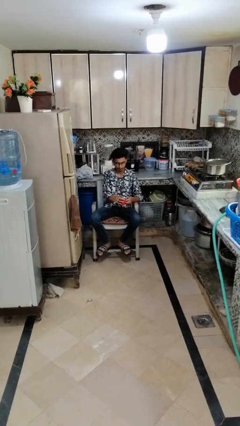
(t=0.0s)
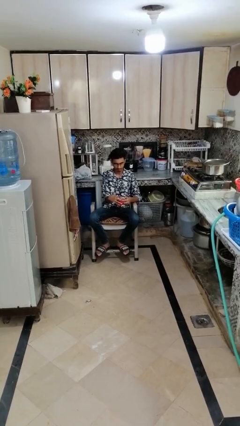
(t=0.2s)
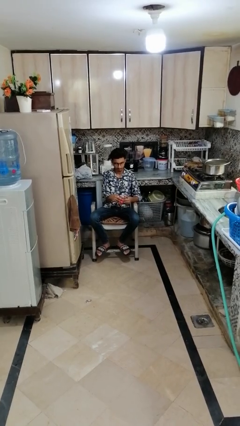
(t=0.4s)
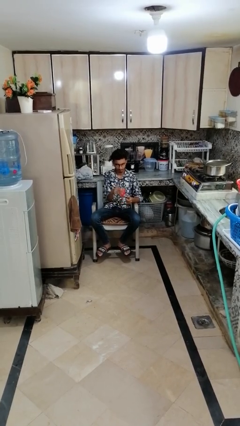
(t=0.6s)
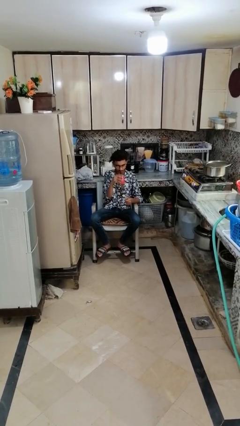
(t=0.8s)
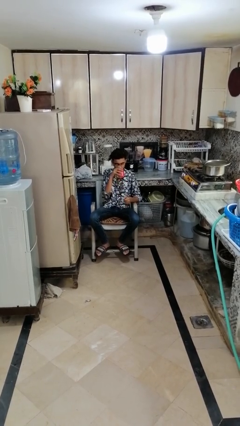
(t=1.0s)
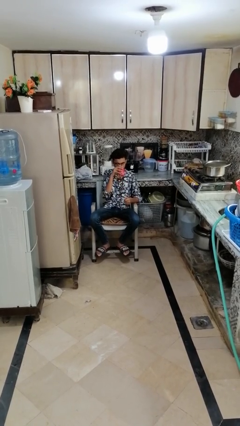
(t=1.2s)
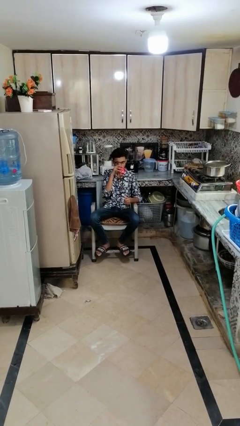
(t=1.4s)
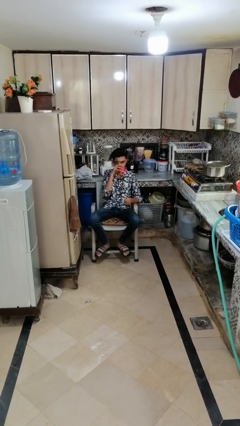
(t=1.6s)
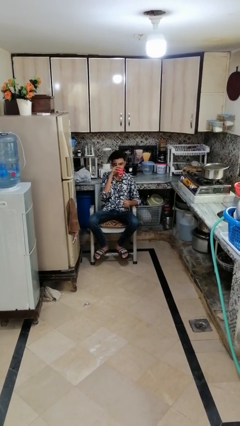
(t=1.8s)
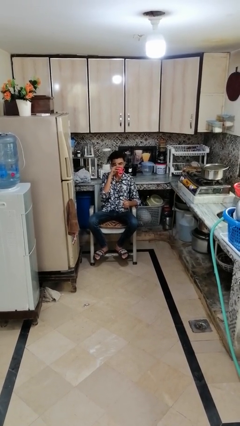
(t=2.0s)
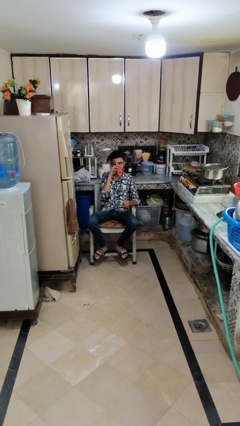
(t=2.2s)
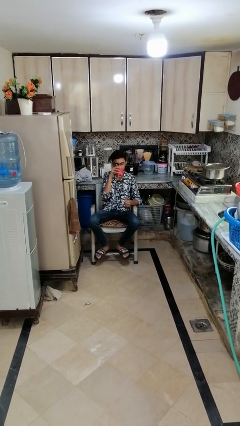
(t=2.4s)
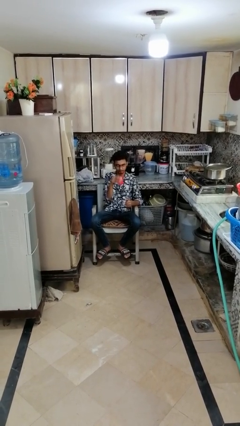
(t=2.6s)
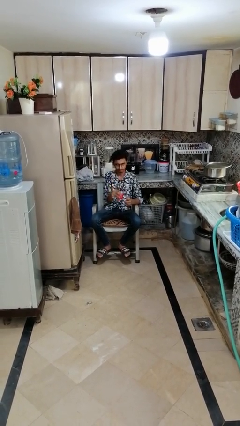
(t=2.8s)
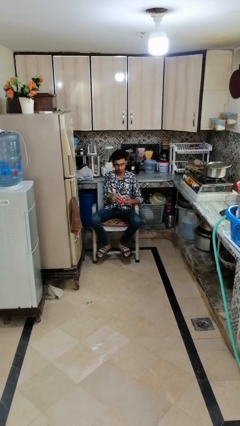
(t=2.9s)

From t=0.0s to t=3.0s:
person drinks from mug

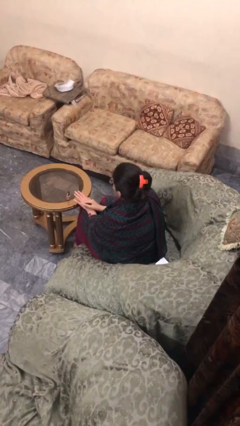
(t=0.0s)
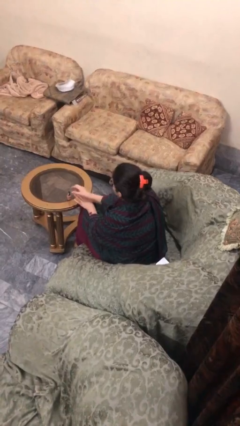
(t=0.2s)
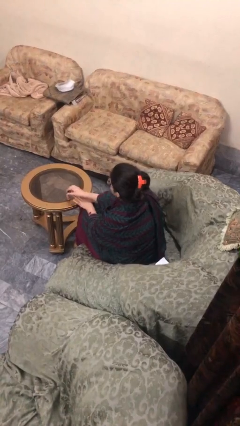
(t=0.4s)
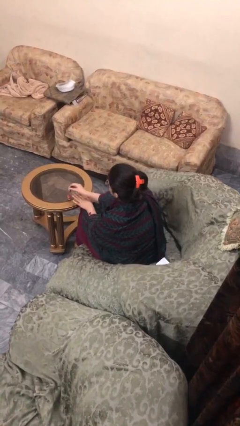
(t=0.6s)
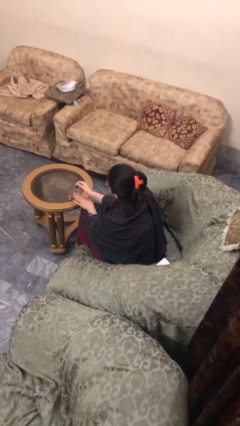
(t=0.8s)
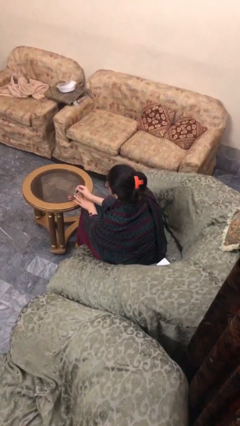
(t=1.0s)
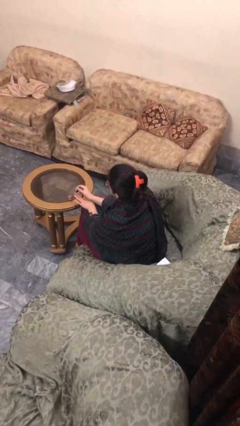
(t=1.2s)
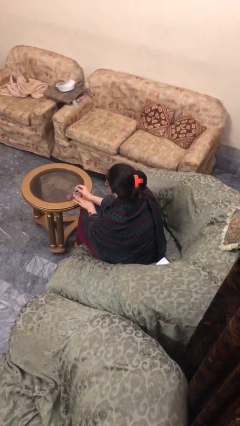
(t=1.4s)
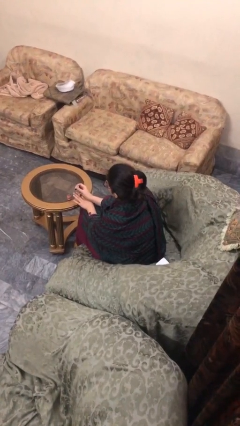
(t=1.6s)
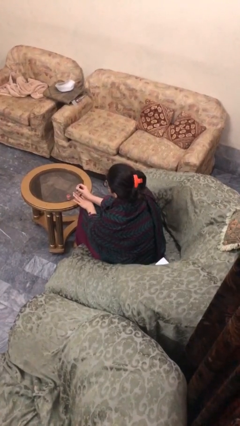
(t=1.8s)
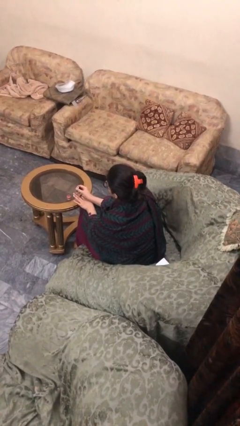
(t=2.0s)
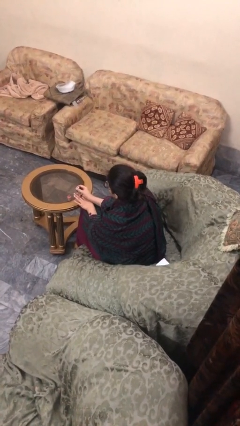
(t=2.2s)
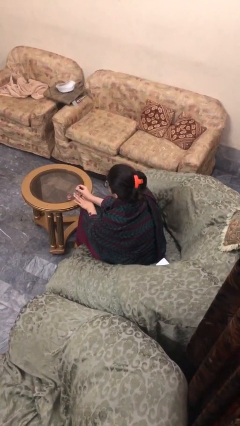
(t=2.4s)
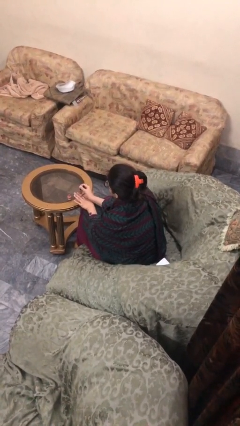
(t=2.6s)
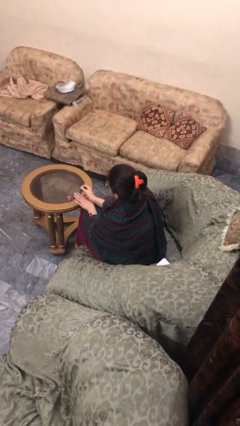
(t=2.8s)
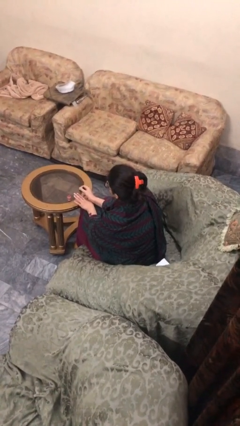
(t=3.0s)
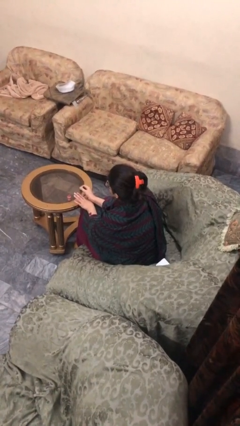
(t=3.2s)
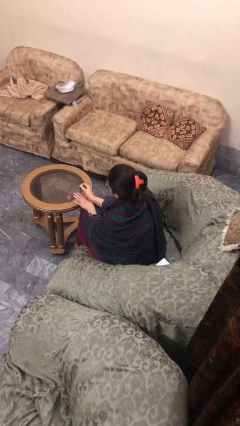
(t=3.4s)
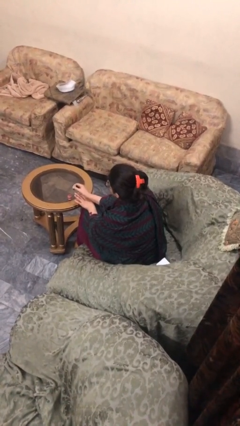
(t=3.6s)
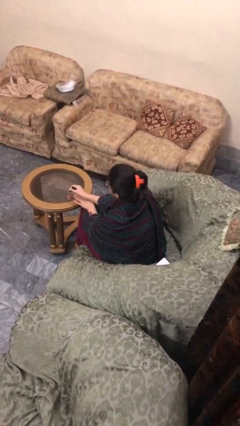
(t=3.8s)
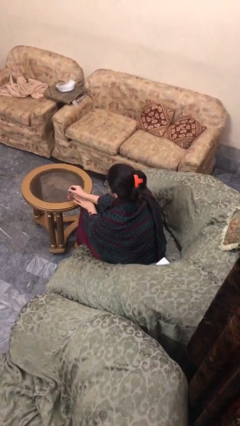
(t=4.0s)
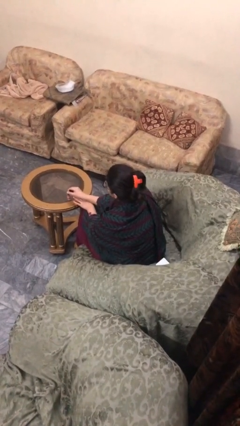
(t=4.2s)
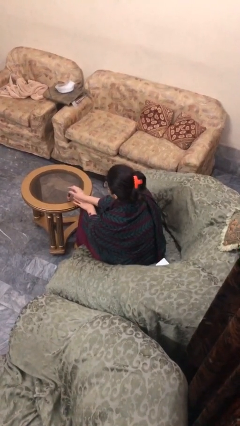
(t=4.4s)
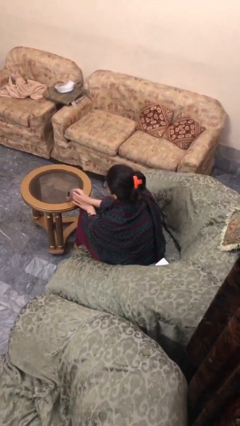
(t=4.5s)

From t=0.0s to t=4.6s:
person paints fingernails

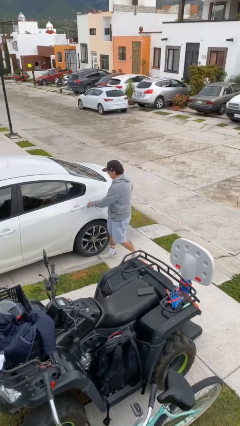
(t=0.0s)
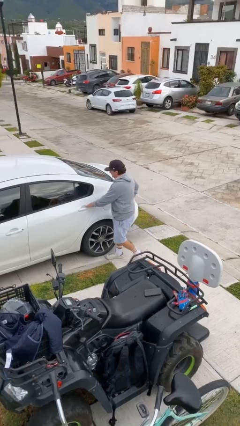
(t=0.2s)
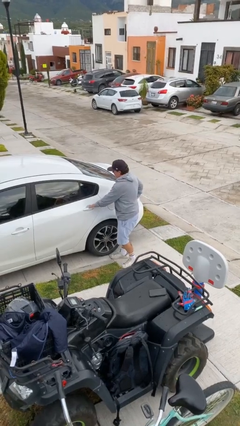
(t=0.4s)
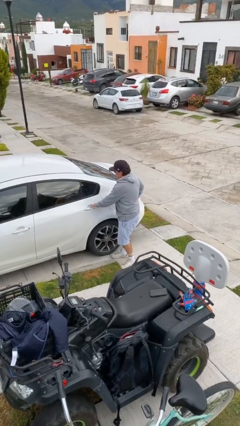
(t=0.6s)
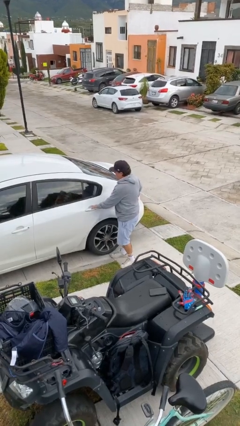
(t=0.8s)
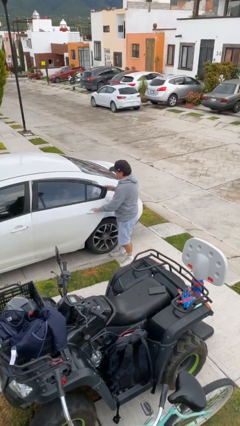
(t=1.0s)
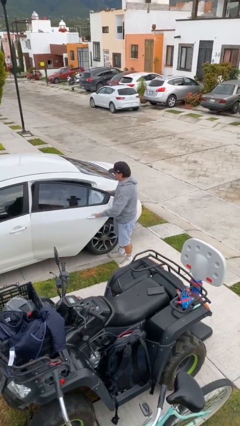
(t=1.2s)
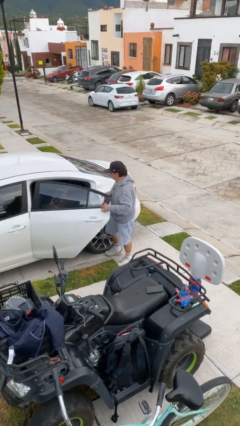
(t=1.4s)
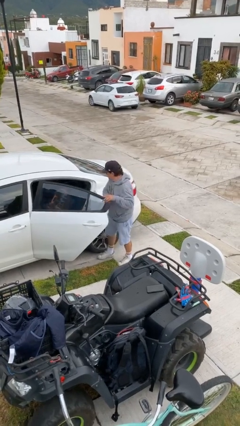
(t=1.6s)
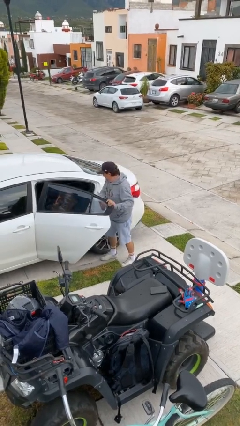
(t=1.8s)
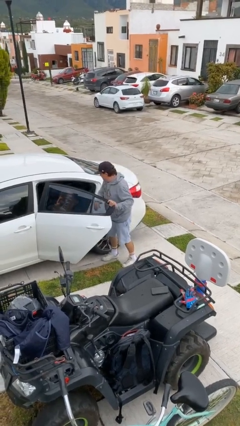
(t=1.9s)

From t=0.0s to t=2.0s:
person opens car door

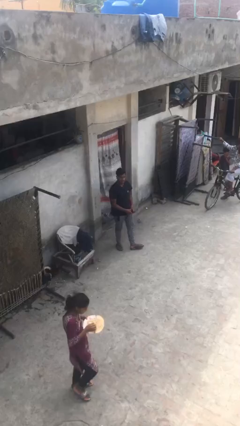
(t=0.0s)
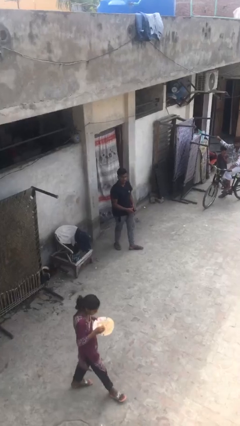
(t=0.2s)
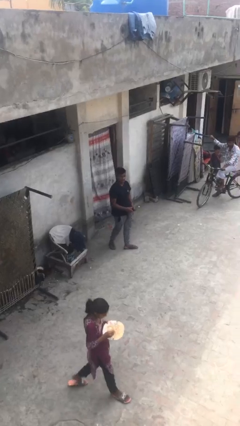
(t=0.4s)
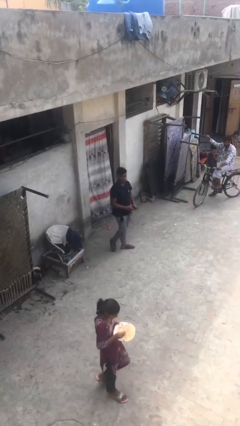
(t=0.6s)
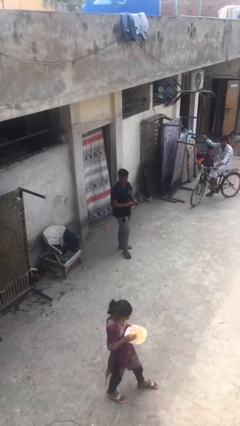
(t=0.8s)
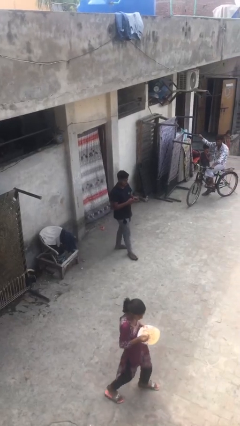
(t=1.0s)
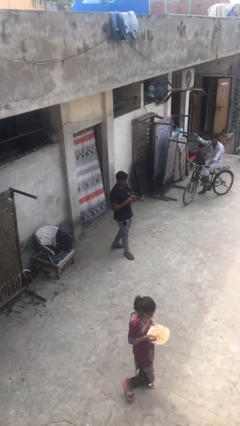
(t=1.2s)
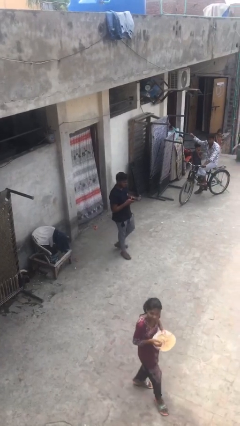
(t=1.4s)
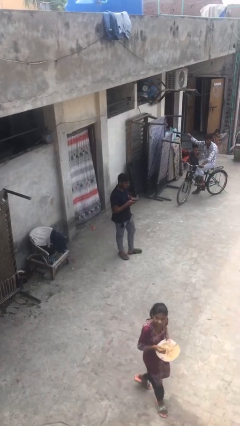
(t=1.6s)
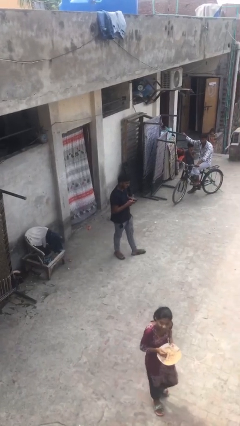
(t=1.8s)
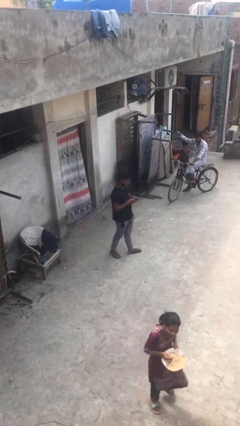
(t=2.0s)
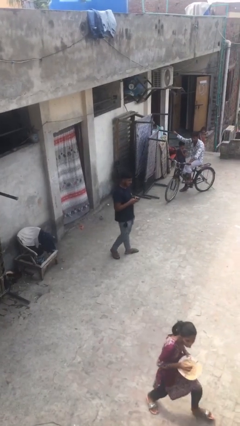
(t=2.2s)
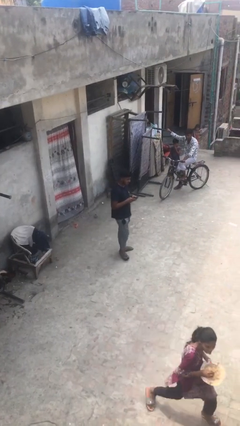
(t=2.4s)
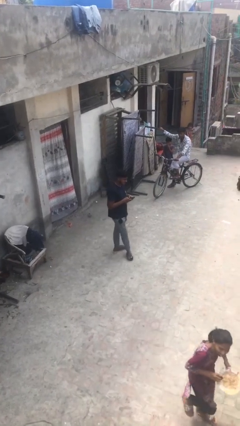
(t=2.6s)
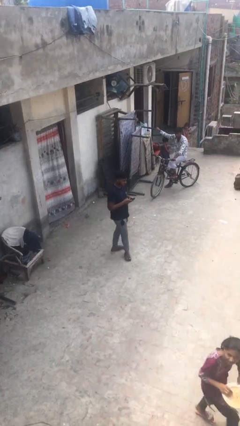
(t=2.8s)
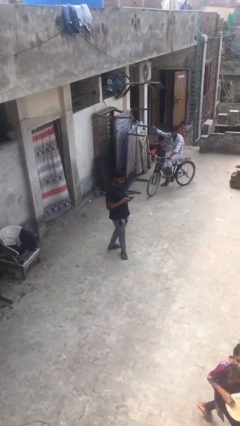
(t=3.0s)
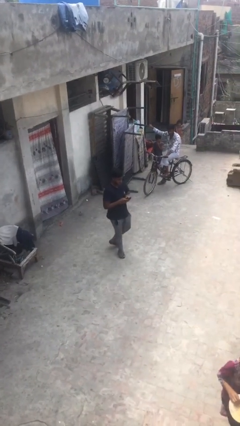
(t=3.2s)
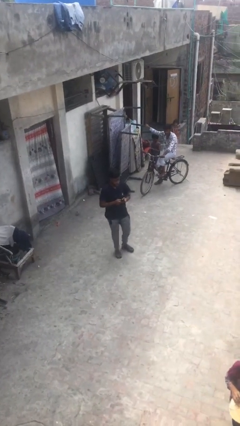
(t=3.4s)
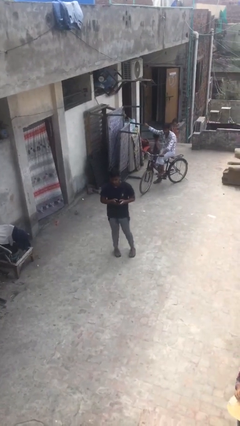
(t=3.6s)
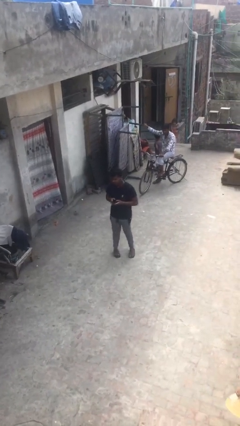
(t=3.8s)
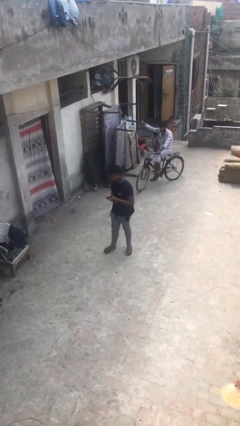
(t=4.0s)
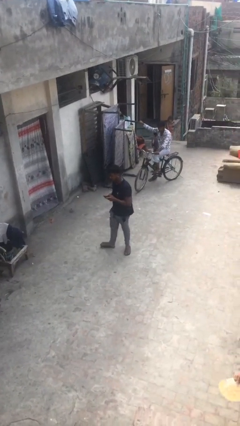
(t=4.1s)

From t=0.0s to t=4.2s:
person texts on phone

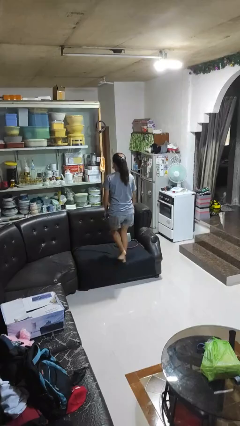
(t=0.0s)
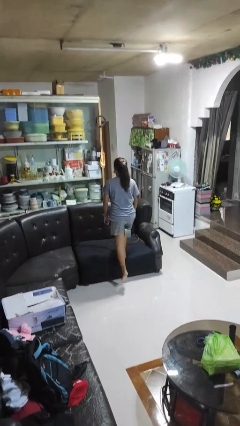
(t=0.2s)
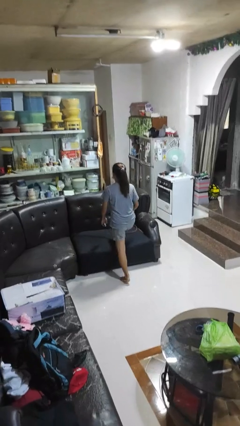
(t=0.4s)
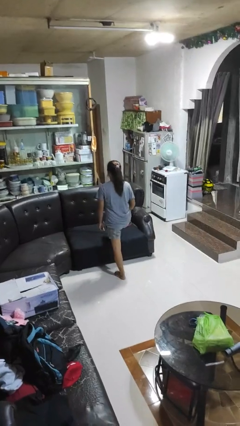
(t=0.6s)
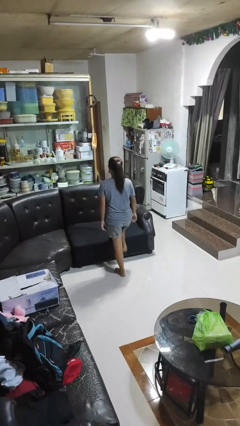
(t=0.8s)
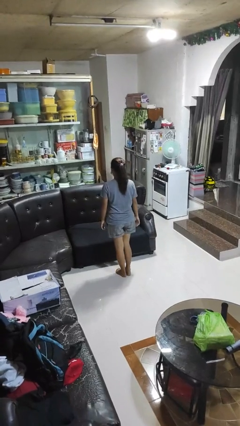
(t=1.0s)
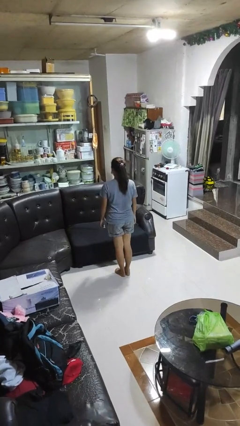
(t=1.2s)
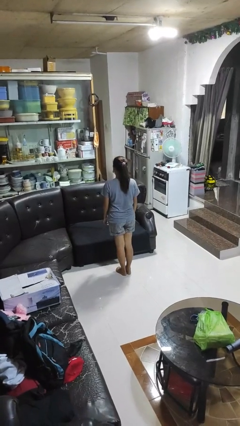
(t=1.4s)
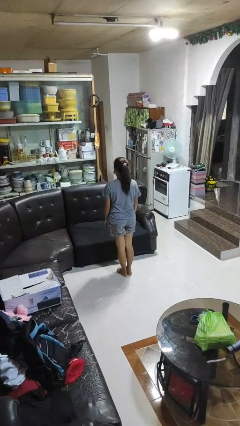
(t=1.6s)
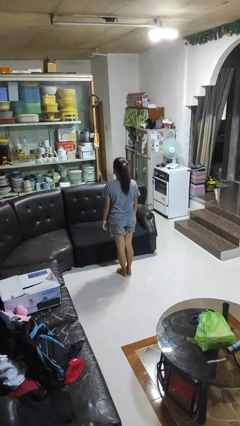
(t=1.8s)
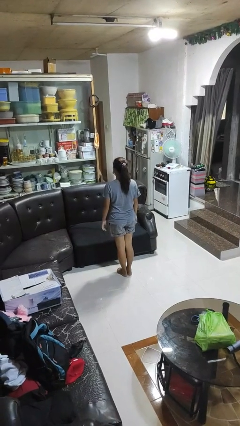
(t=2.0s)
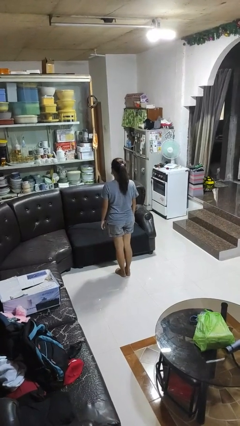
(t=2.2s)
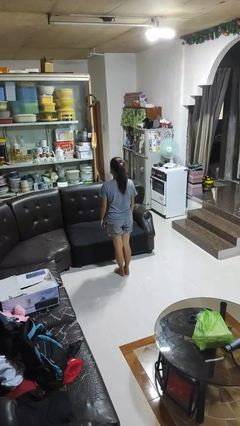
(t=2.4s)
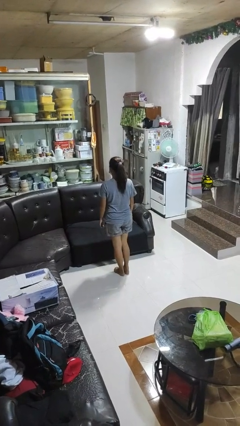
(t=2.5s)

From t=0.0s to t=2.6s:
person climbs off couch

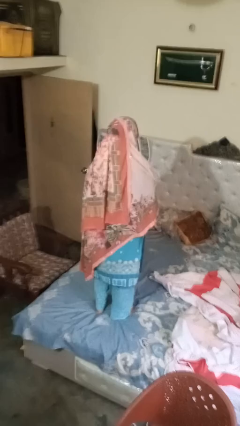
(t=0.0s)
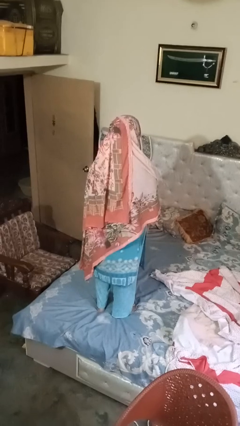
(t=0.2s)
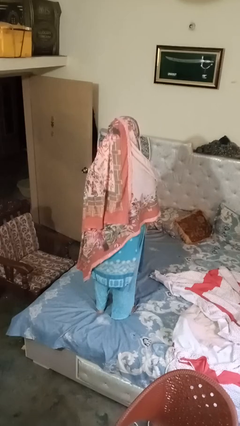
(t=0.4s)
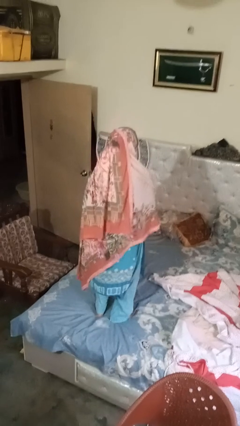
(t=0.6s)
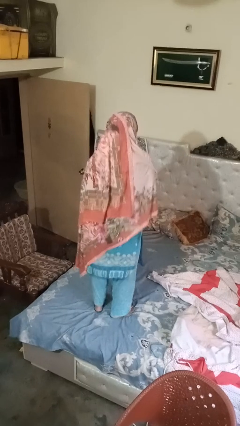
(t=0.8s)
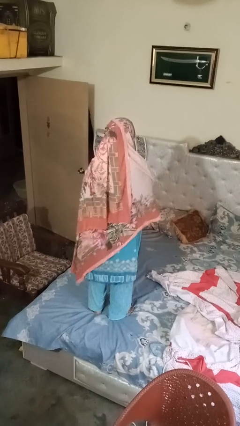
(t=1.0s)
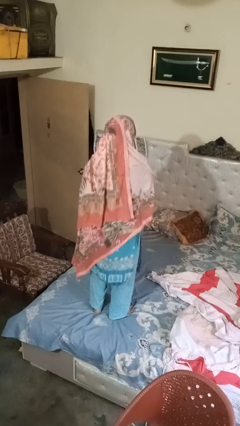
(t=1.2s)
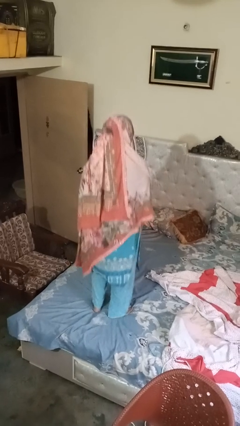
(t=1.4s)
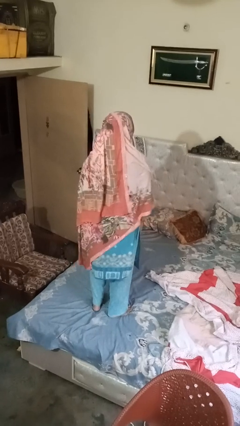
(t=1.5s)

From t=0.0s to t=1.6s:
person jumps on bed
